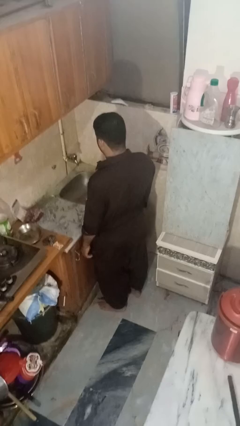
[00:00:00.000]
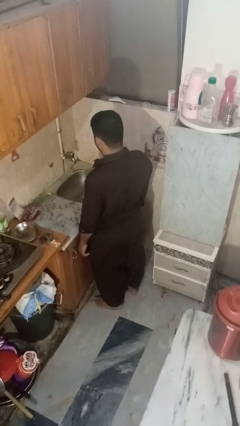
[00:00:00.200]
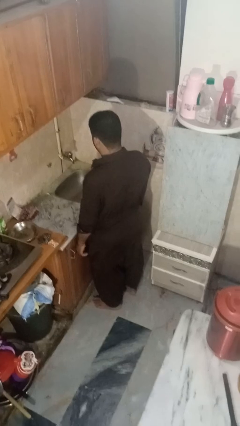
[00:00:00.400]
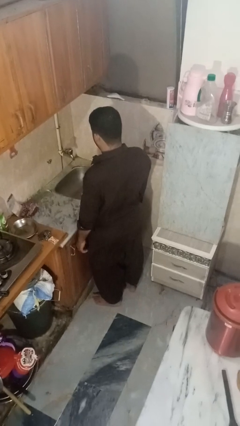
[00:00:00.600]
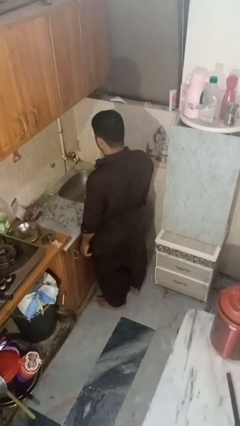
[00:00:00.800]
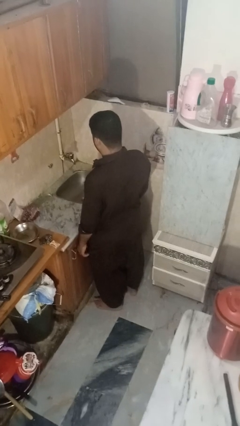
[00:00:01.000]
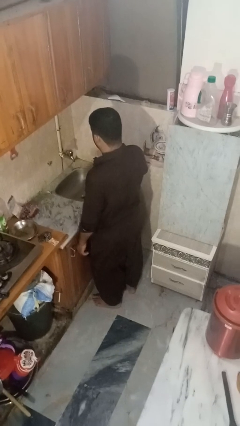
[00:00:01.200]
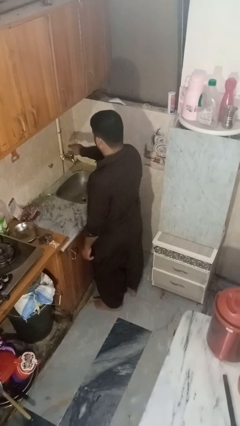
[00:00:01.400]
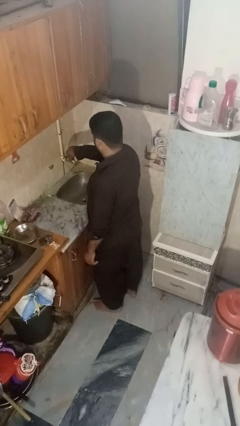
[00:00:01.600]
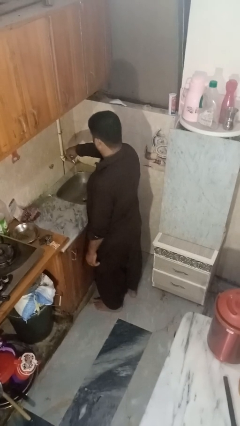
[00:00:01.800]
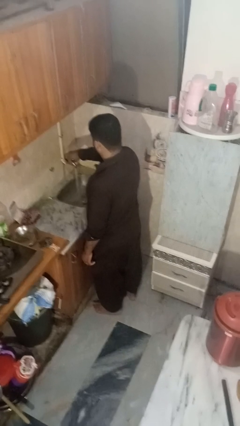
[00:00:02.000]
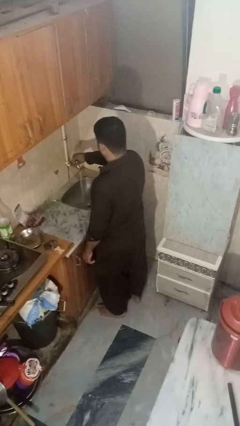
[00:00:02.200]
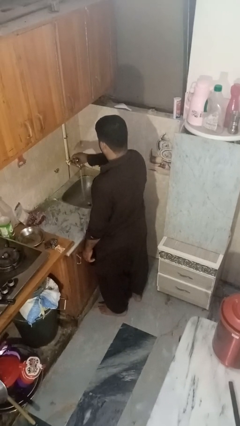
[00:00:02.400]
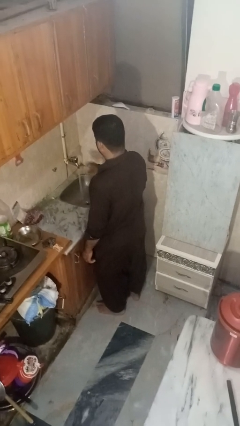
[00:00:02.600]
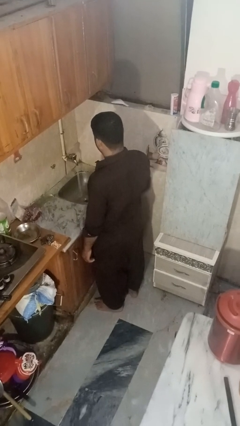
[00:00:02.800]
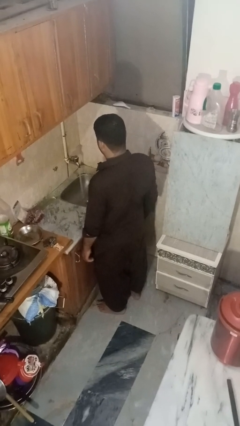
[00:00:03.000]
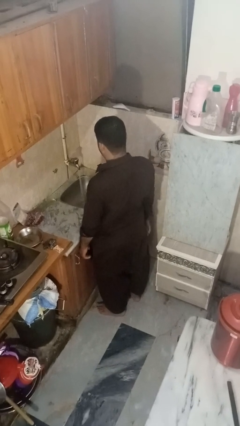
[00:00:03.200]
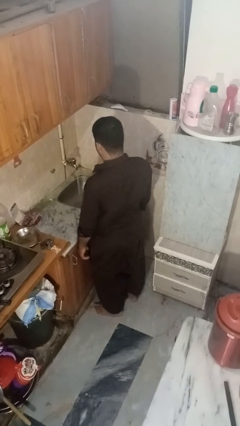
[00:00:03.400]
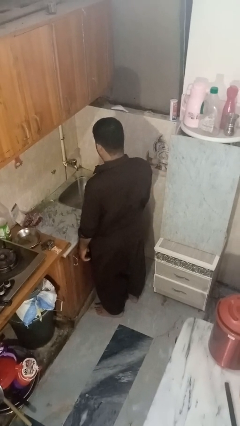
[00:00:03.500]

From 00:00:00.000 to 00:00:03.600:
person turns on faucet

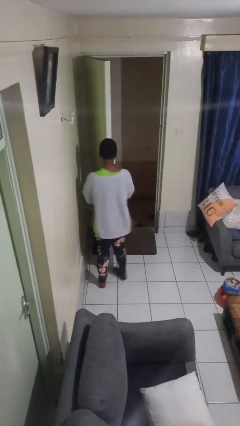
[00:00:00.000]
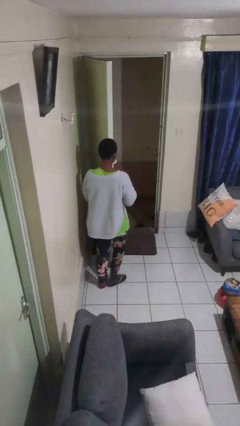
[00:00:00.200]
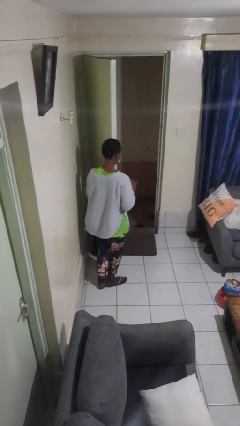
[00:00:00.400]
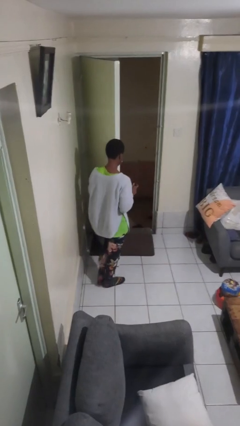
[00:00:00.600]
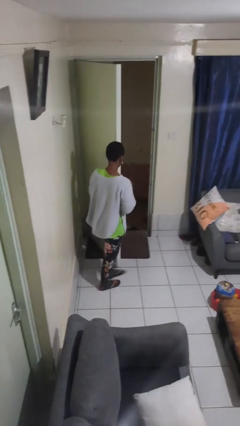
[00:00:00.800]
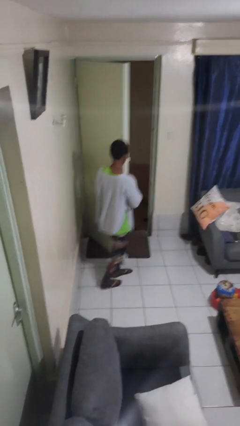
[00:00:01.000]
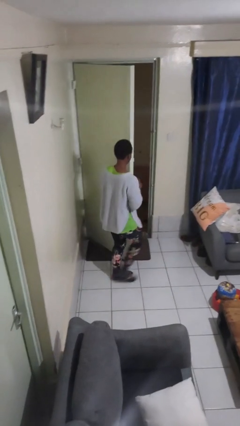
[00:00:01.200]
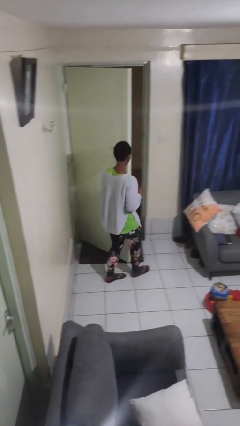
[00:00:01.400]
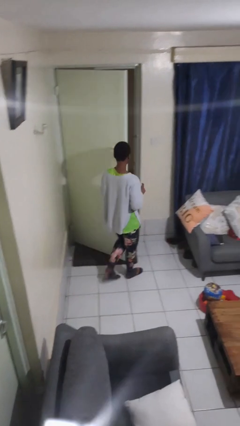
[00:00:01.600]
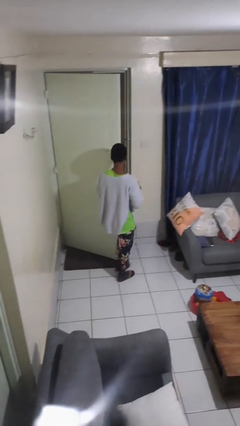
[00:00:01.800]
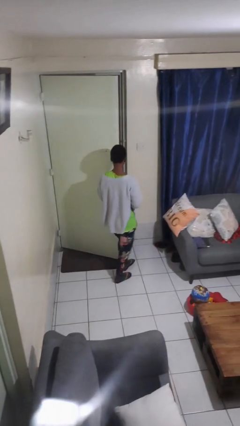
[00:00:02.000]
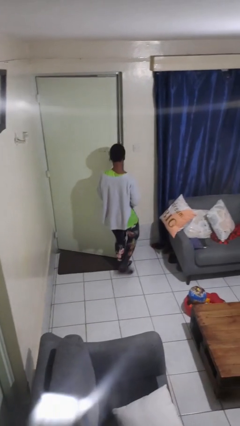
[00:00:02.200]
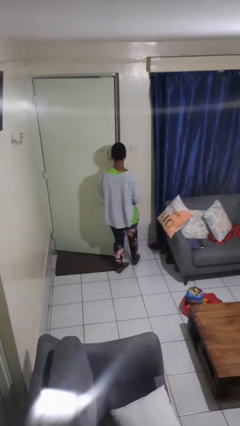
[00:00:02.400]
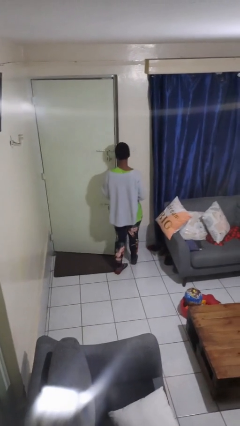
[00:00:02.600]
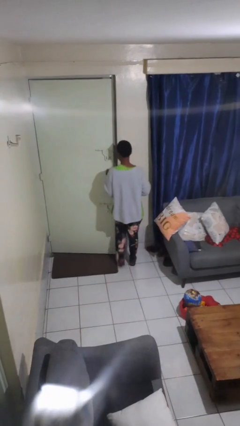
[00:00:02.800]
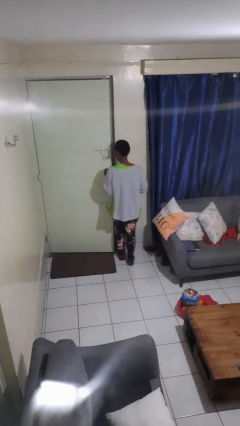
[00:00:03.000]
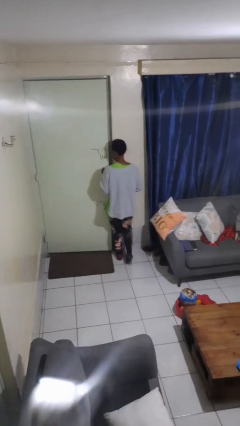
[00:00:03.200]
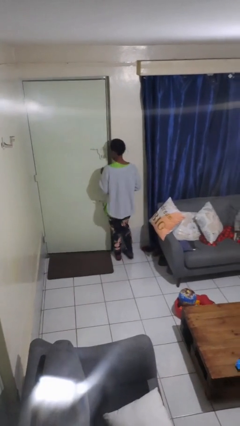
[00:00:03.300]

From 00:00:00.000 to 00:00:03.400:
person closes facility door

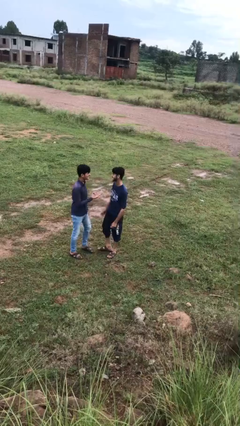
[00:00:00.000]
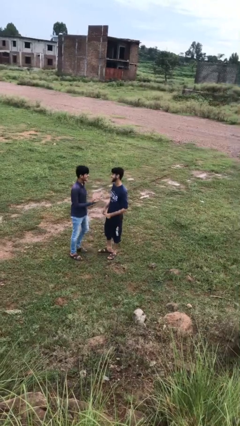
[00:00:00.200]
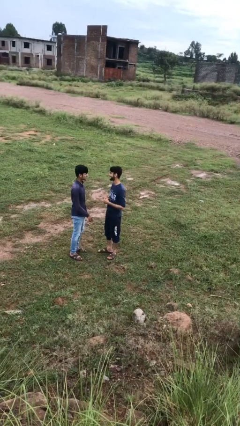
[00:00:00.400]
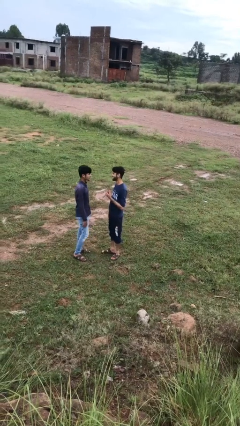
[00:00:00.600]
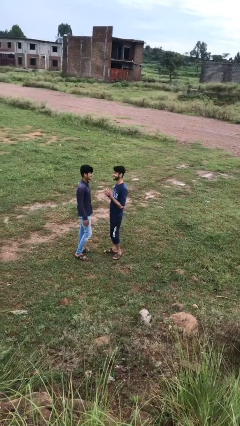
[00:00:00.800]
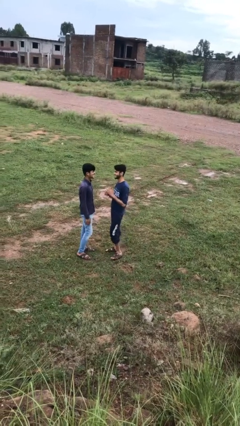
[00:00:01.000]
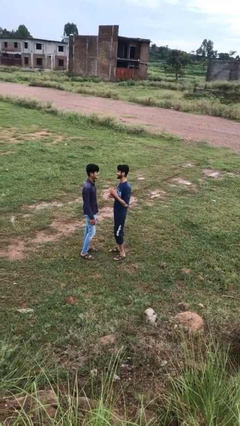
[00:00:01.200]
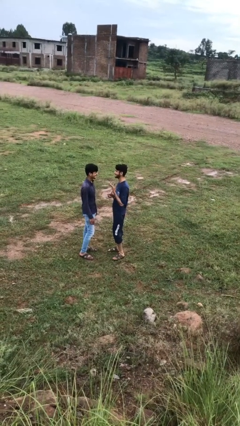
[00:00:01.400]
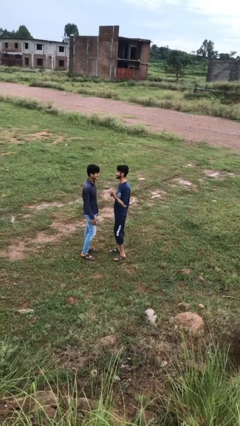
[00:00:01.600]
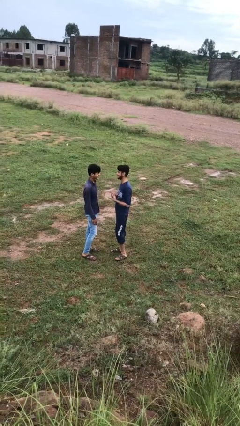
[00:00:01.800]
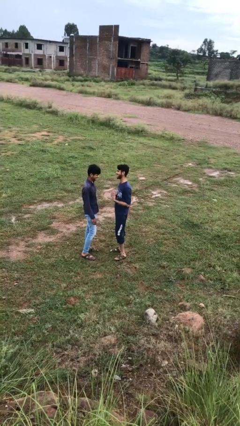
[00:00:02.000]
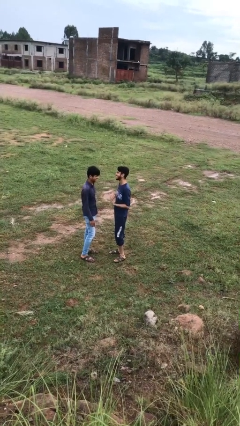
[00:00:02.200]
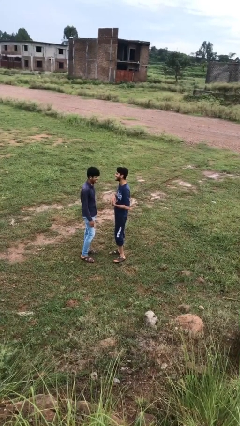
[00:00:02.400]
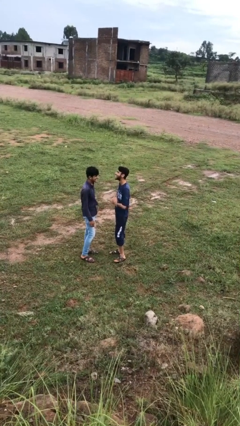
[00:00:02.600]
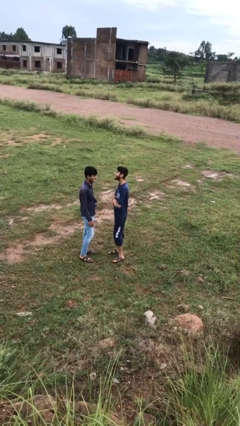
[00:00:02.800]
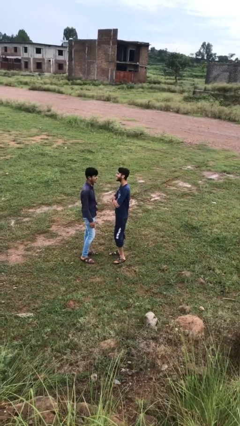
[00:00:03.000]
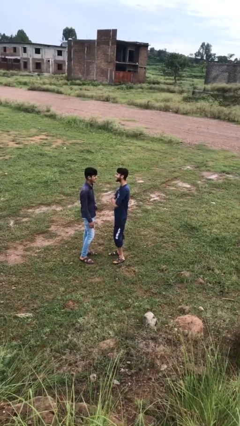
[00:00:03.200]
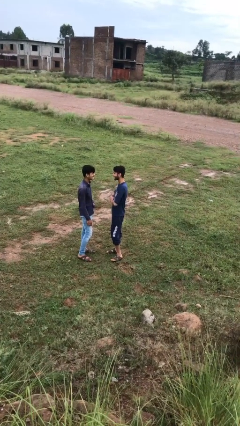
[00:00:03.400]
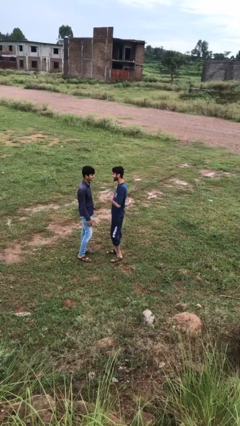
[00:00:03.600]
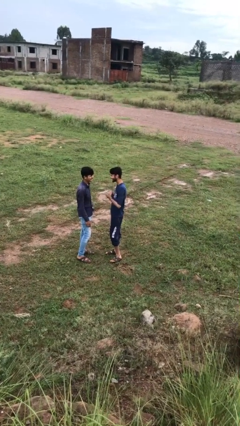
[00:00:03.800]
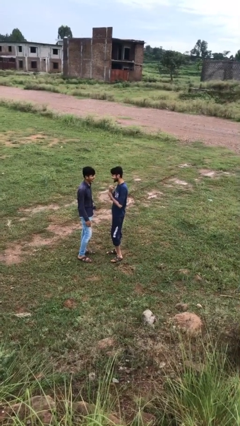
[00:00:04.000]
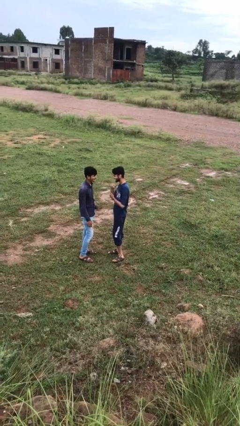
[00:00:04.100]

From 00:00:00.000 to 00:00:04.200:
person talks to person

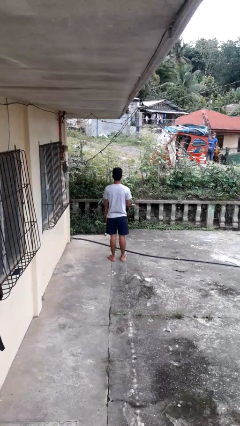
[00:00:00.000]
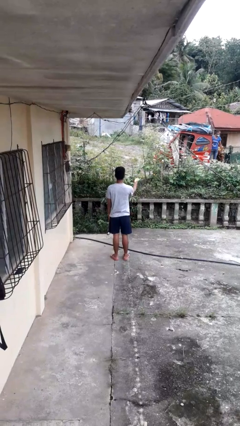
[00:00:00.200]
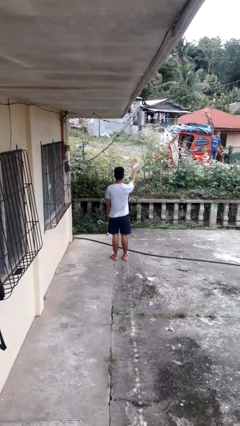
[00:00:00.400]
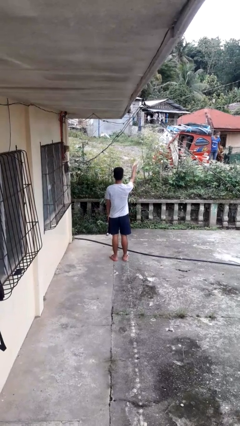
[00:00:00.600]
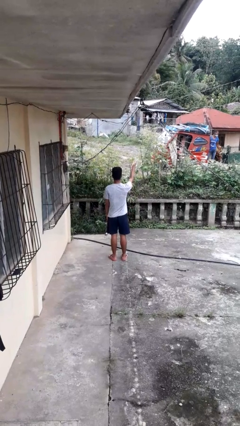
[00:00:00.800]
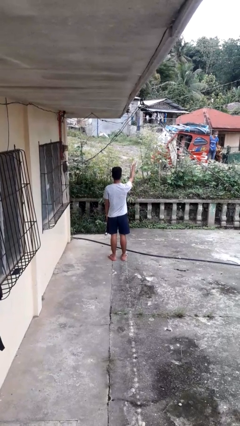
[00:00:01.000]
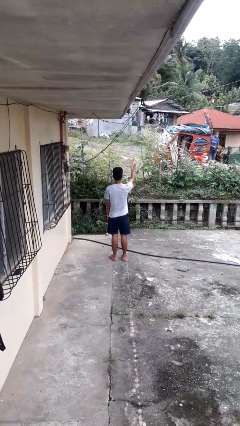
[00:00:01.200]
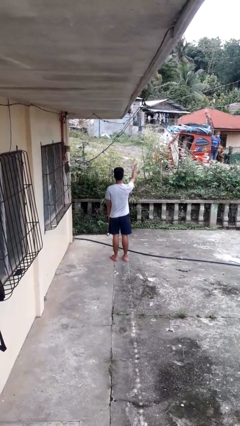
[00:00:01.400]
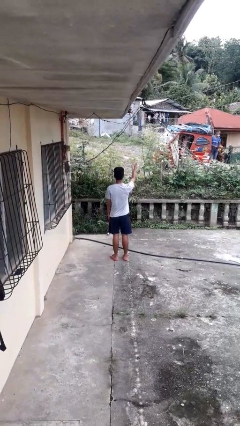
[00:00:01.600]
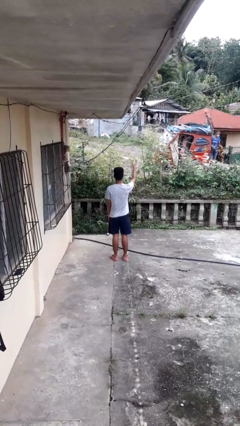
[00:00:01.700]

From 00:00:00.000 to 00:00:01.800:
person gestures swipe up

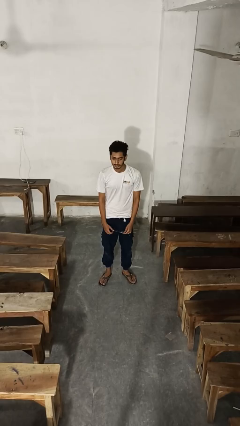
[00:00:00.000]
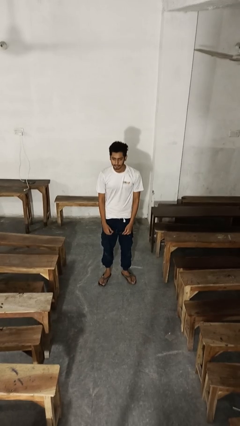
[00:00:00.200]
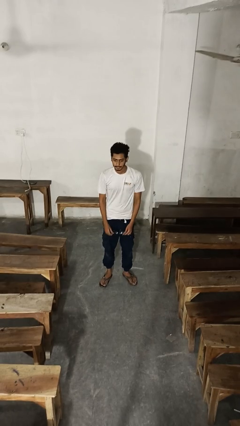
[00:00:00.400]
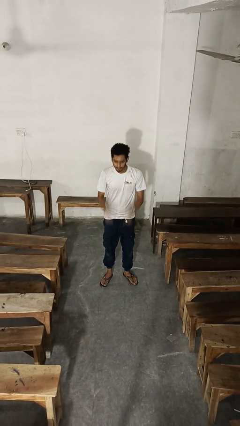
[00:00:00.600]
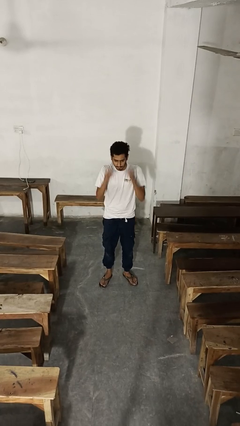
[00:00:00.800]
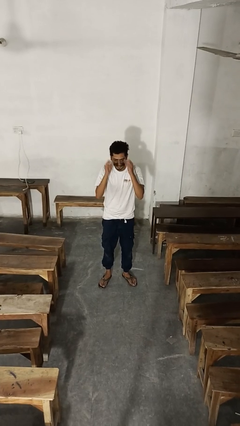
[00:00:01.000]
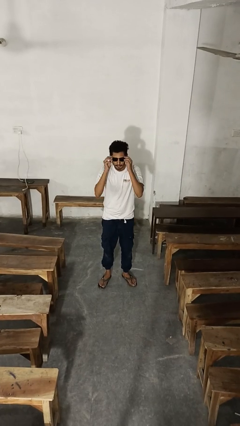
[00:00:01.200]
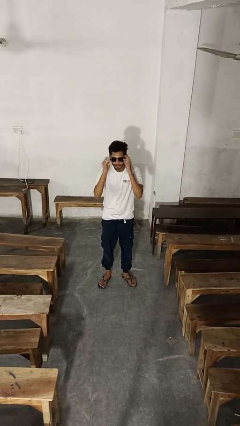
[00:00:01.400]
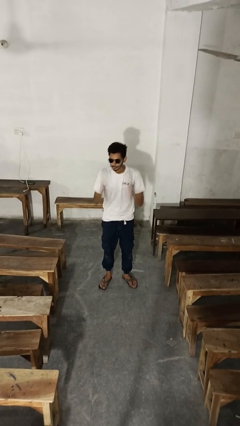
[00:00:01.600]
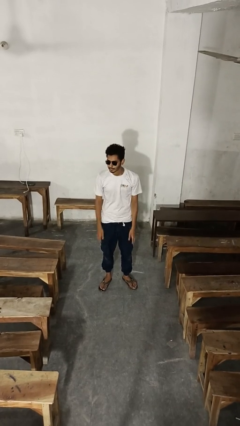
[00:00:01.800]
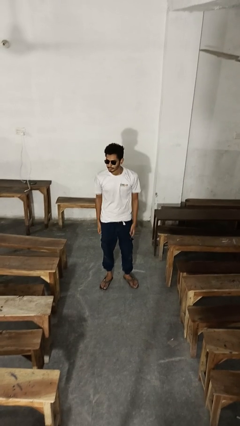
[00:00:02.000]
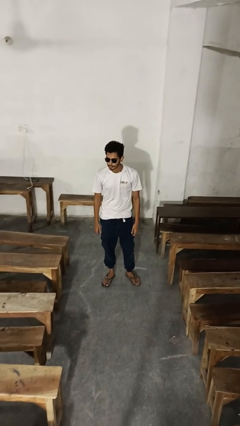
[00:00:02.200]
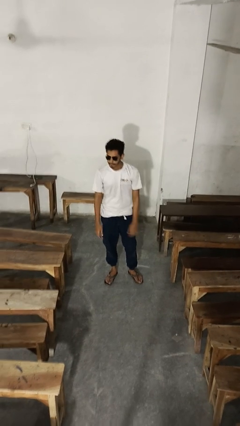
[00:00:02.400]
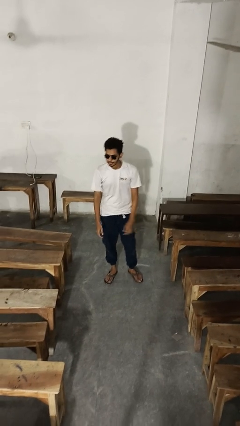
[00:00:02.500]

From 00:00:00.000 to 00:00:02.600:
person puts on sunglasses

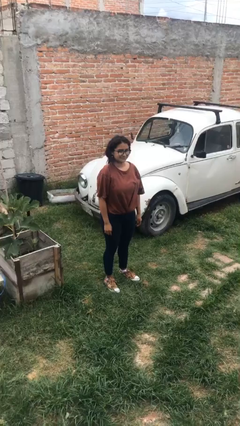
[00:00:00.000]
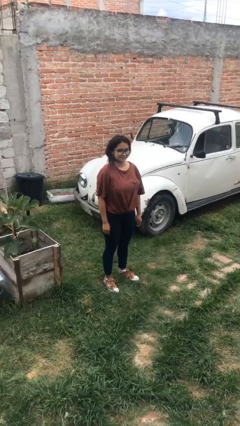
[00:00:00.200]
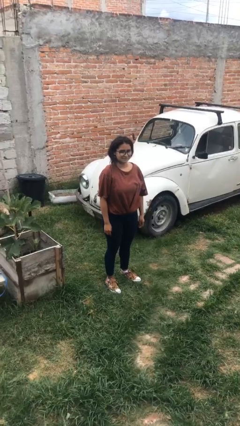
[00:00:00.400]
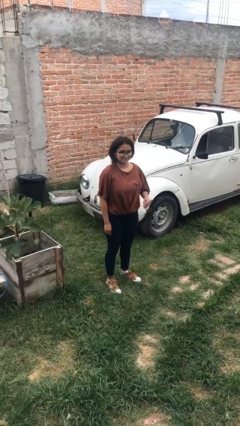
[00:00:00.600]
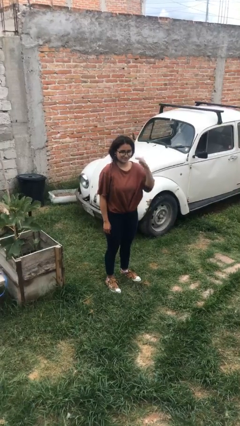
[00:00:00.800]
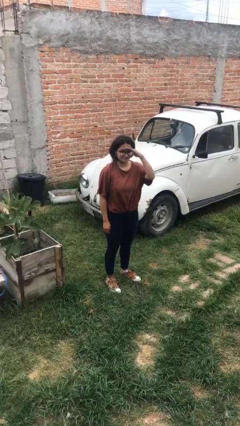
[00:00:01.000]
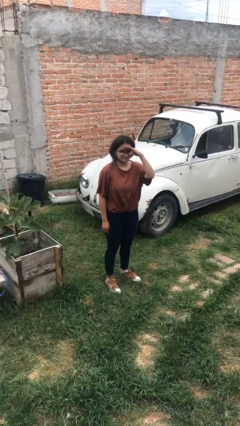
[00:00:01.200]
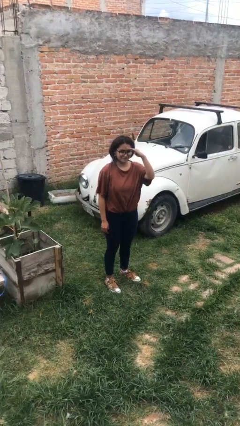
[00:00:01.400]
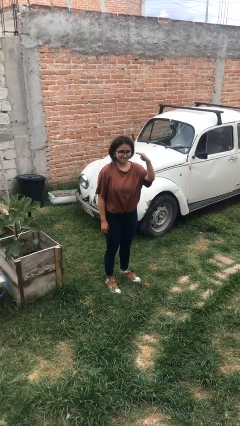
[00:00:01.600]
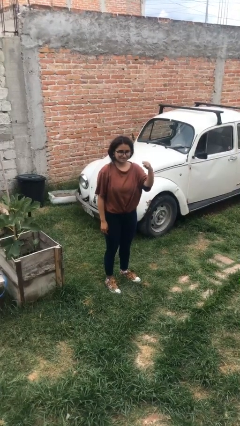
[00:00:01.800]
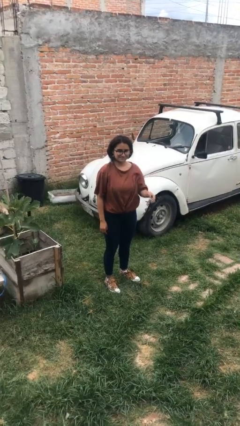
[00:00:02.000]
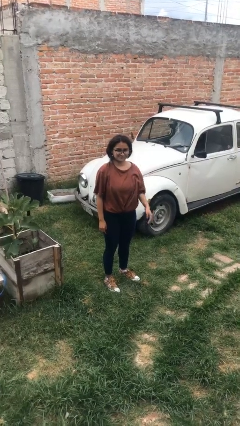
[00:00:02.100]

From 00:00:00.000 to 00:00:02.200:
person salutes
